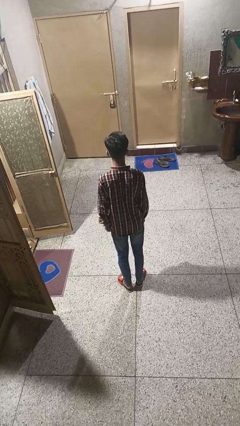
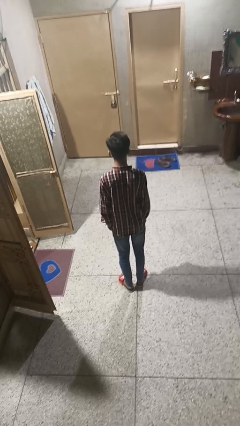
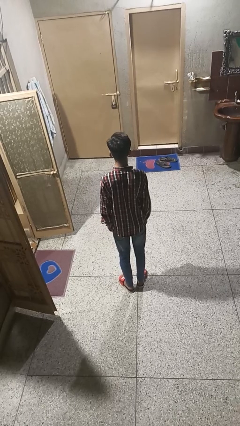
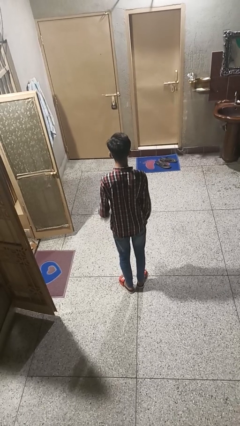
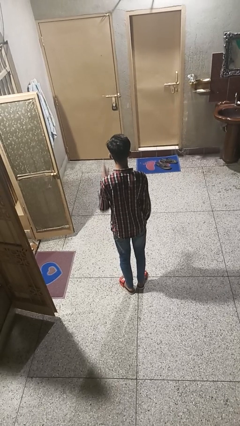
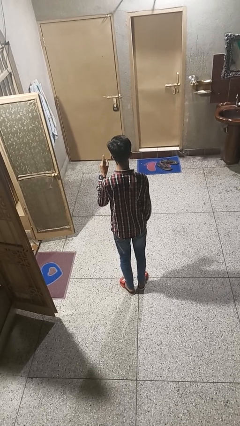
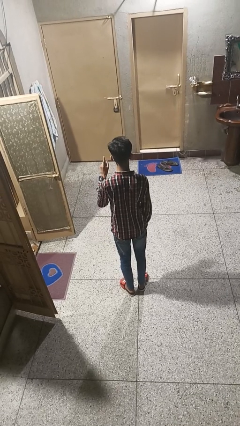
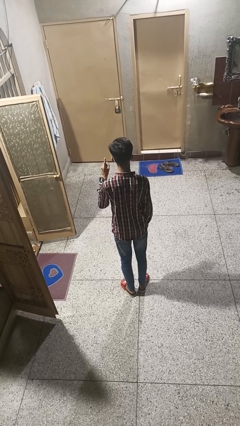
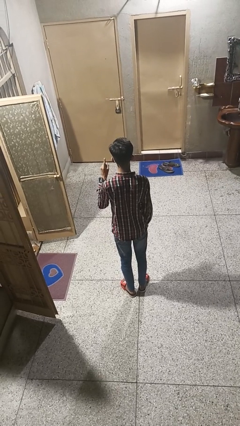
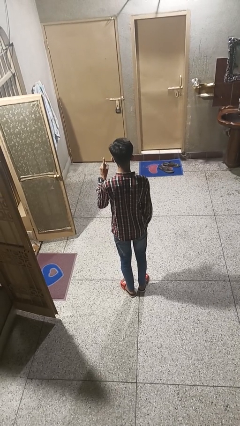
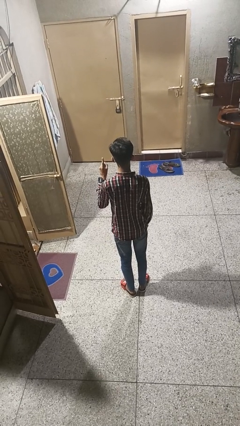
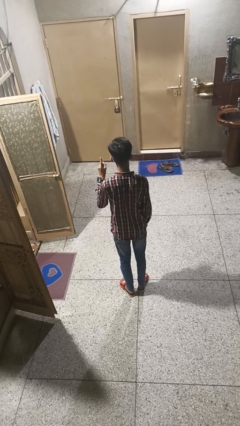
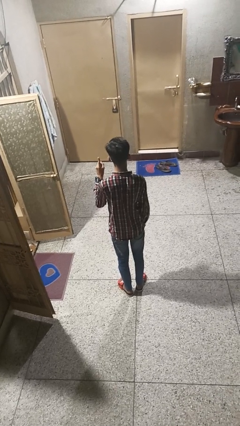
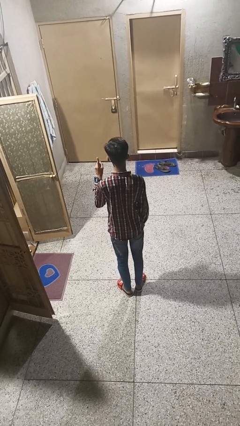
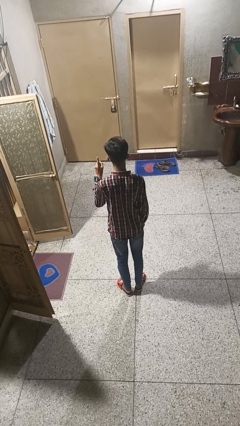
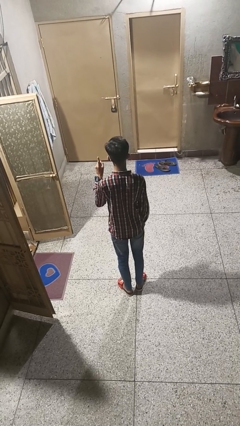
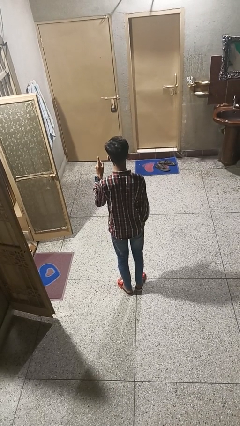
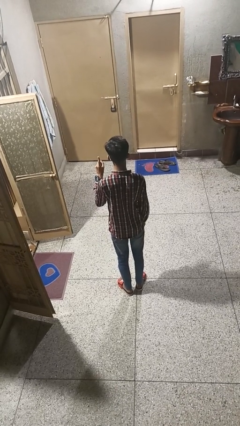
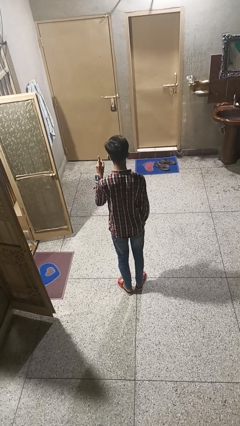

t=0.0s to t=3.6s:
person gestures number one

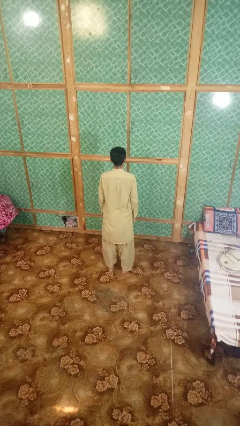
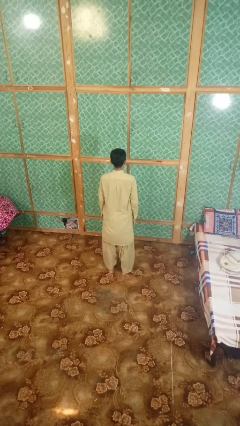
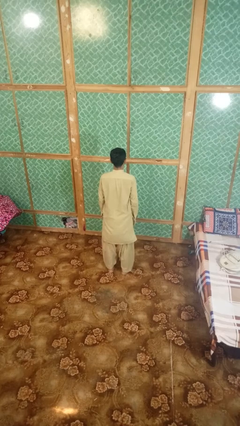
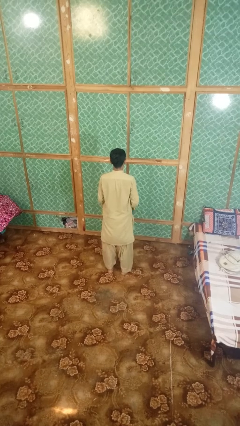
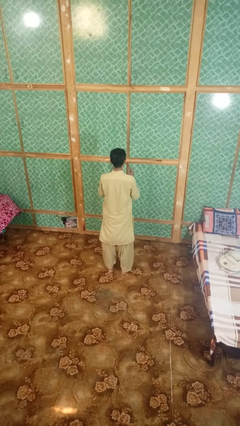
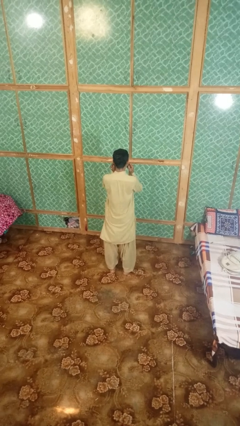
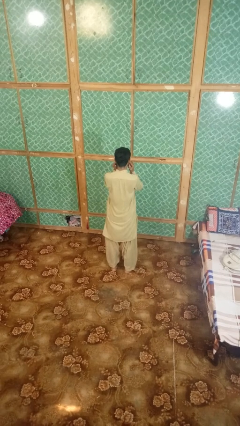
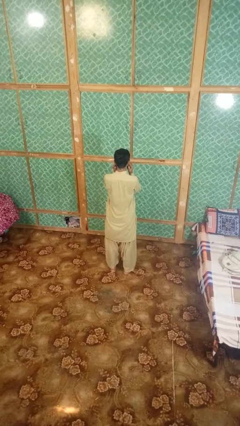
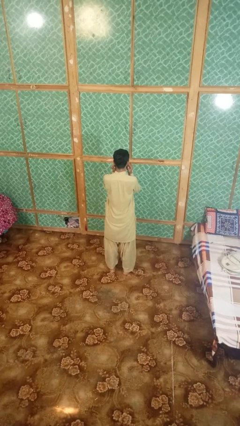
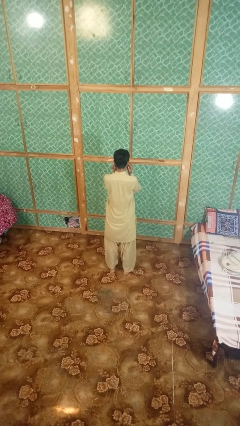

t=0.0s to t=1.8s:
person puts fingers in ear

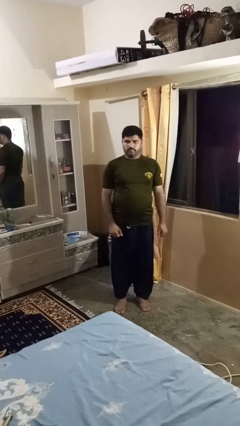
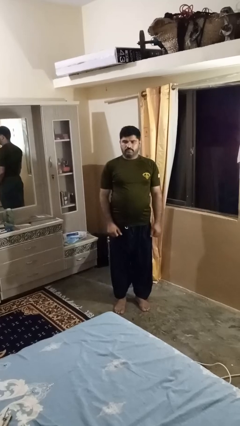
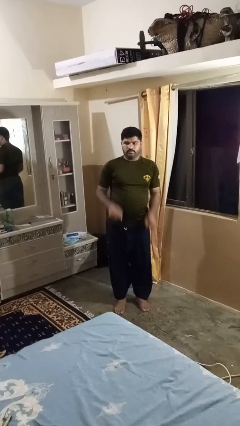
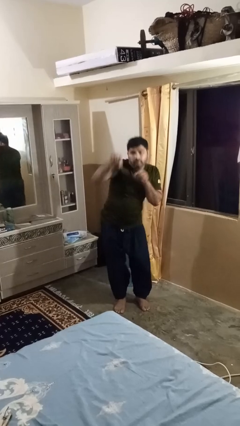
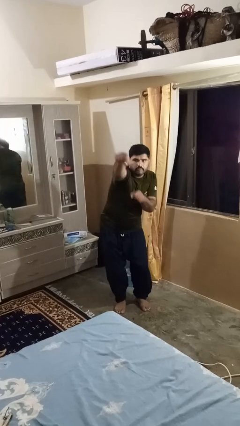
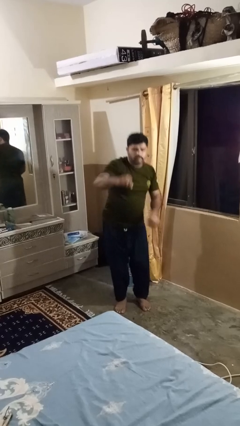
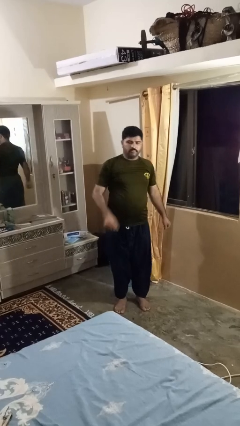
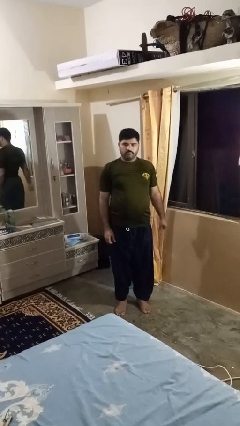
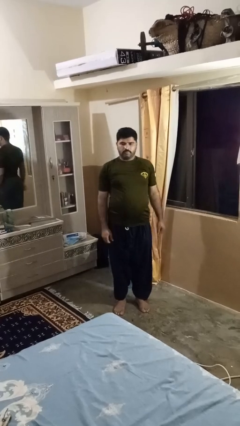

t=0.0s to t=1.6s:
person karate chop

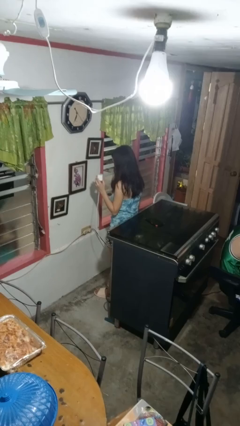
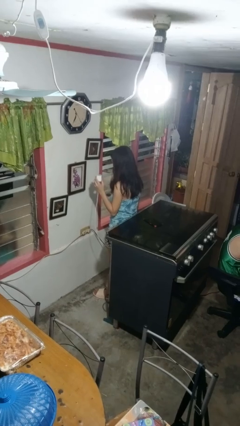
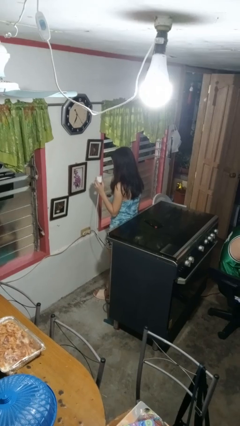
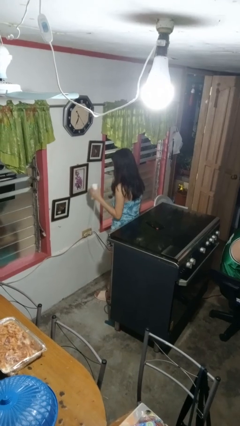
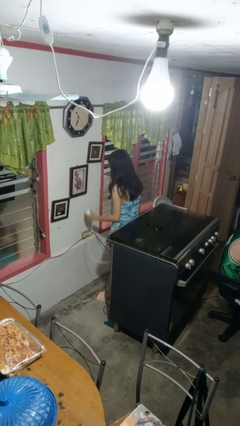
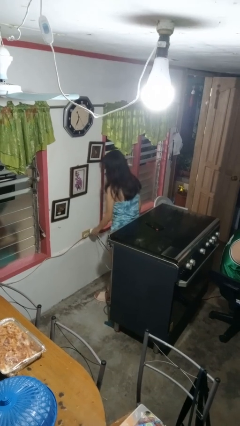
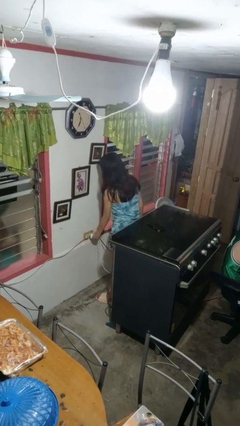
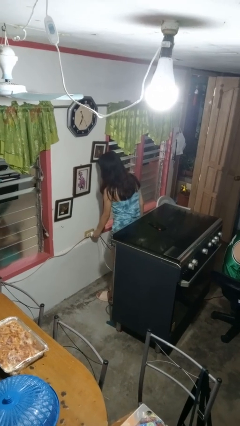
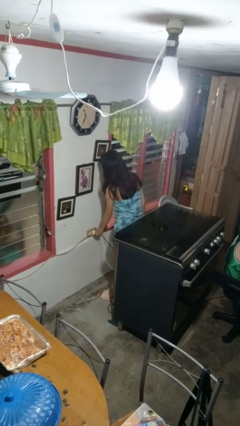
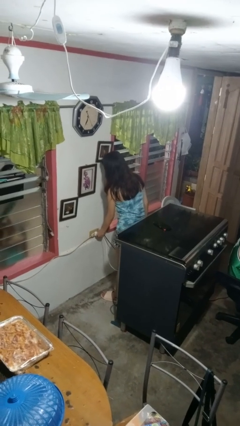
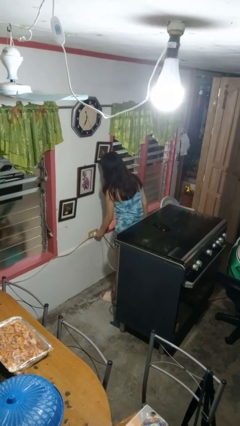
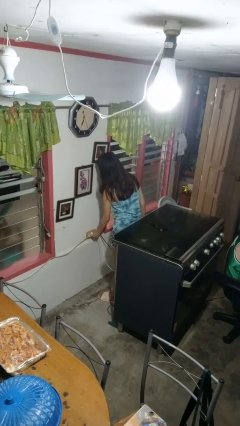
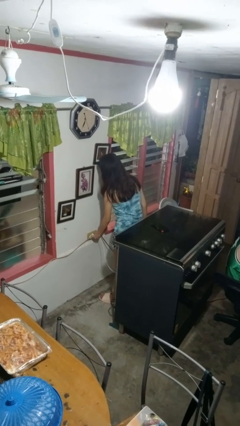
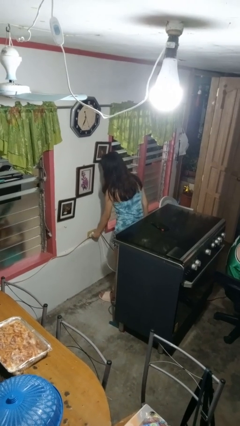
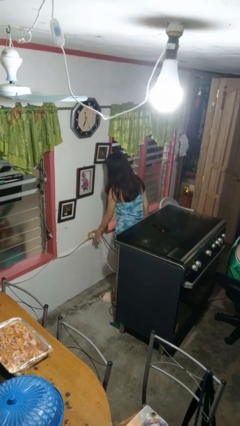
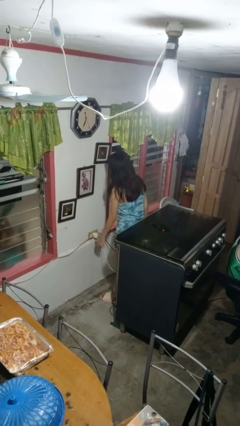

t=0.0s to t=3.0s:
person plugs into electrical socket

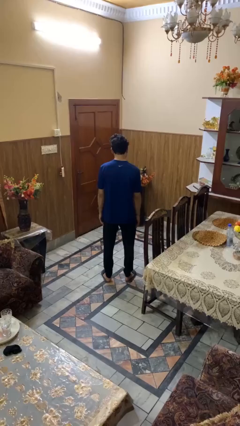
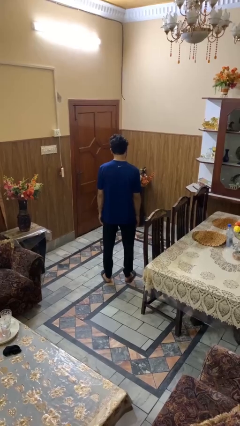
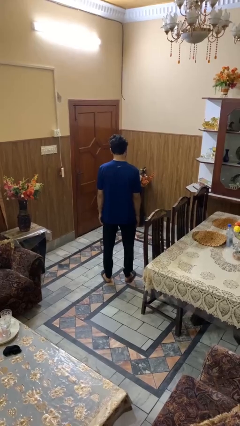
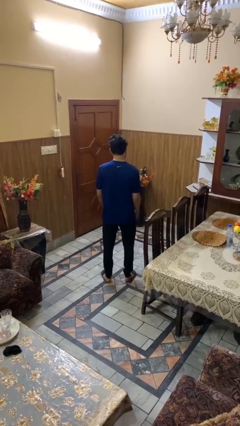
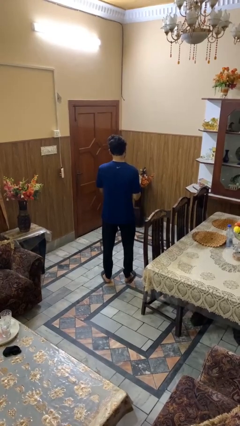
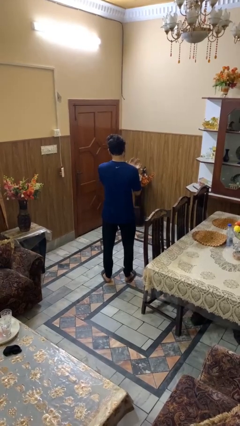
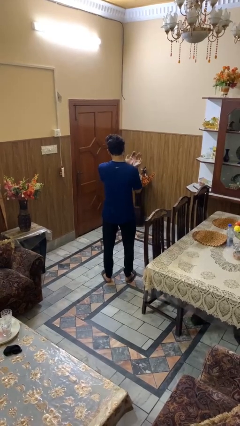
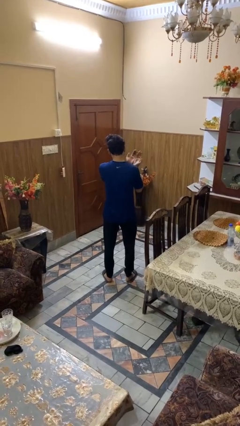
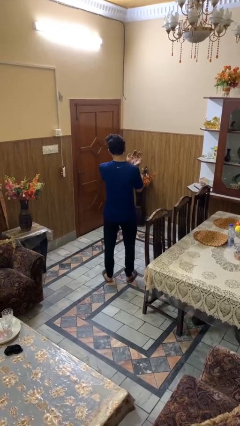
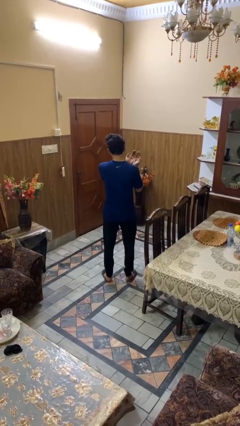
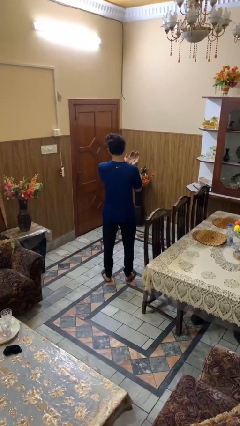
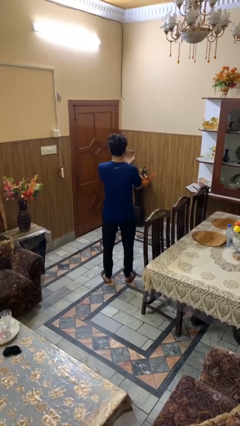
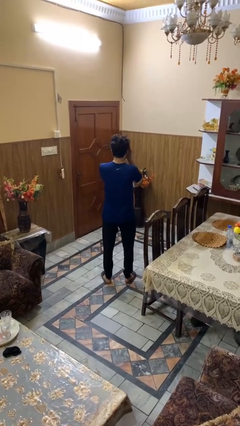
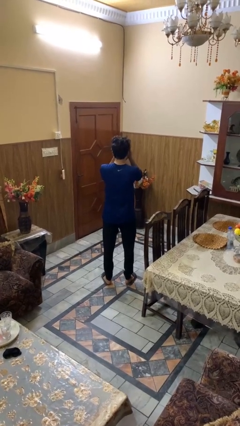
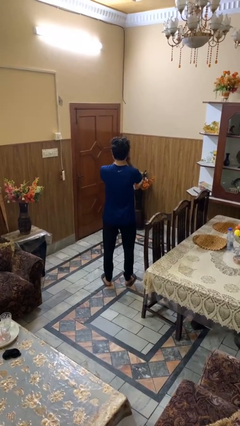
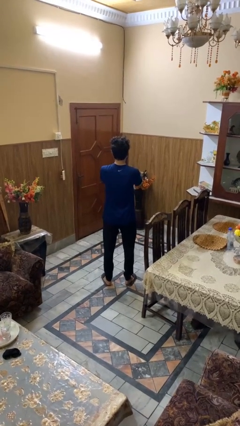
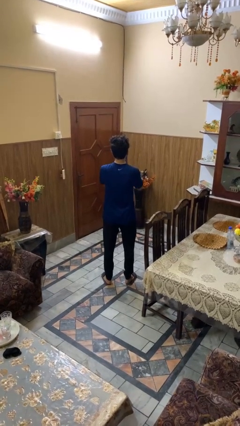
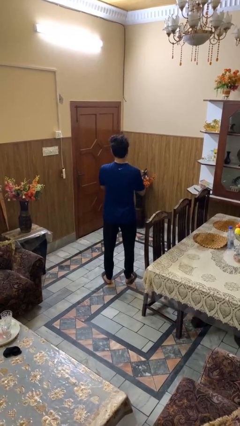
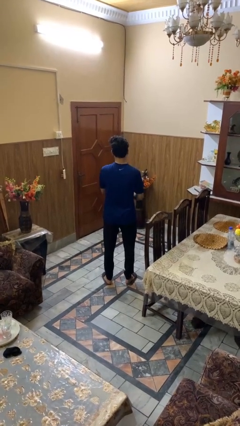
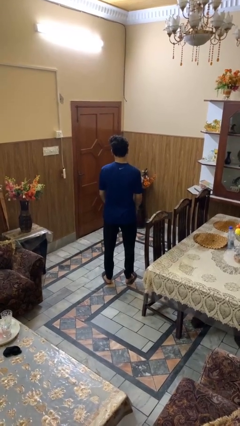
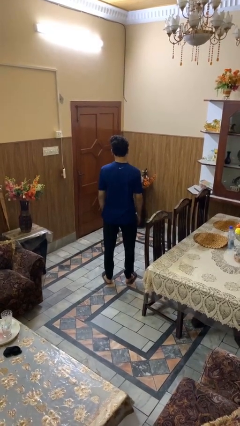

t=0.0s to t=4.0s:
person prays

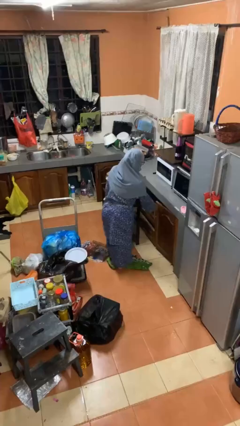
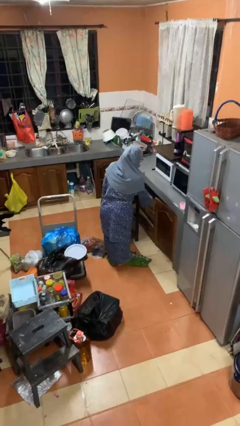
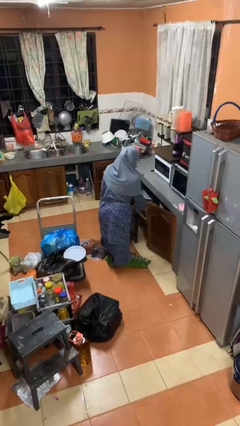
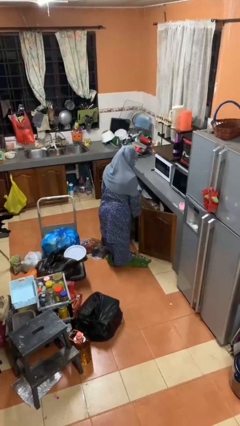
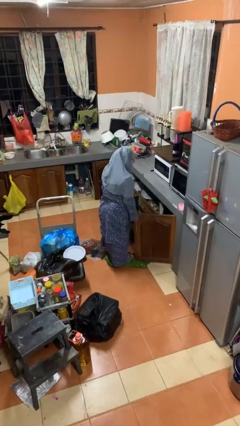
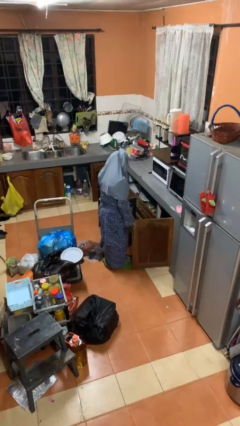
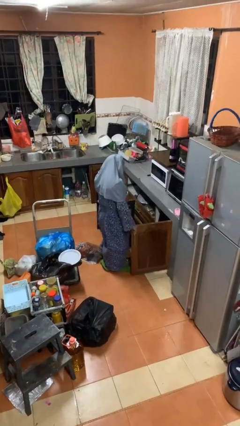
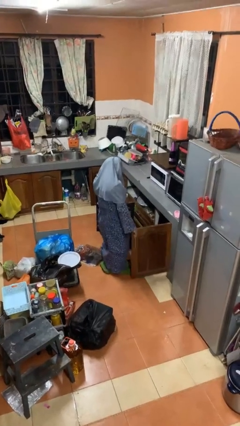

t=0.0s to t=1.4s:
person opens cabinet

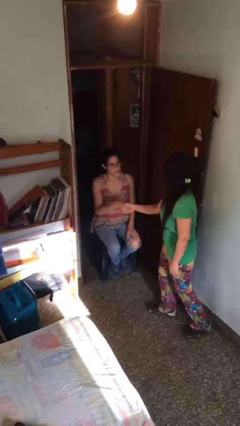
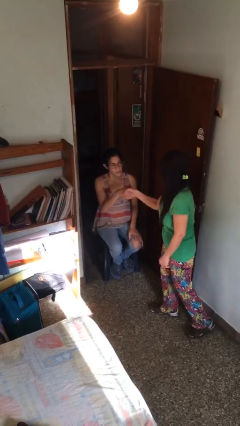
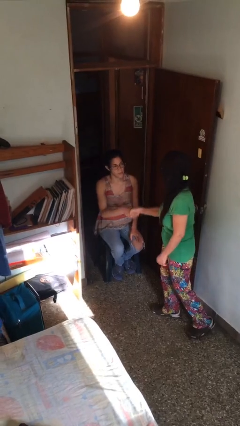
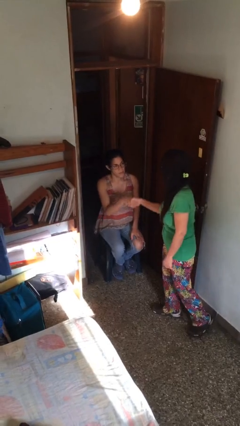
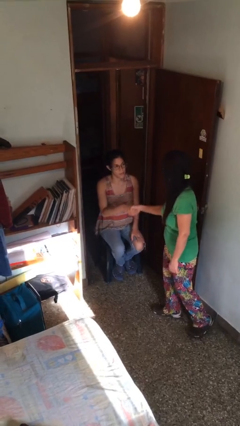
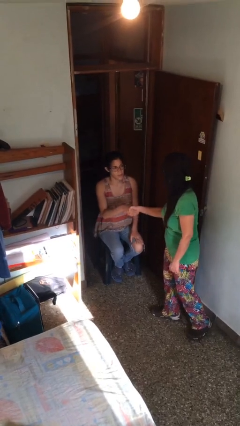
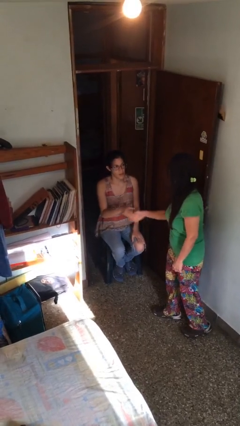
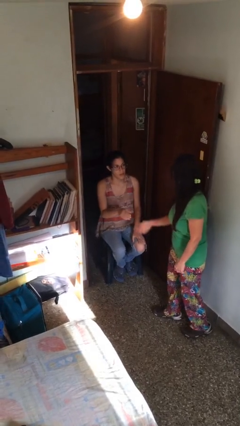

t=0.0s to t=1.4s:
person shakes hand

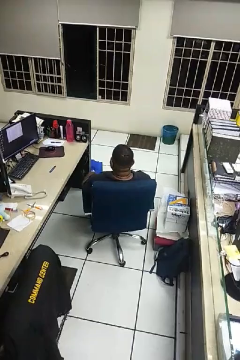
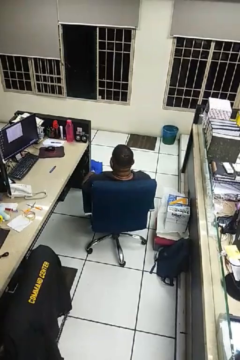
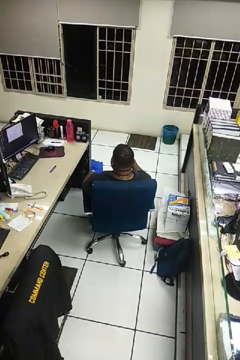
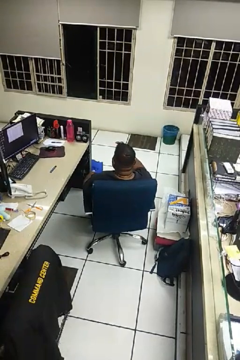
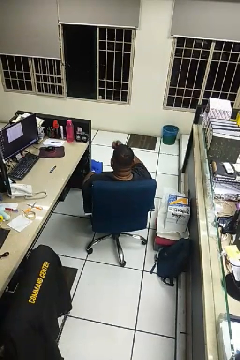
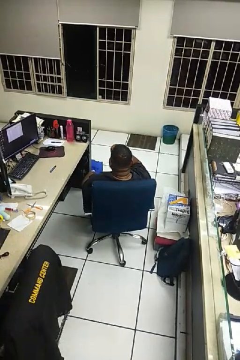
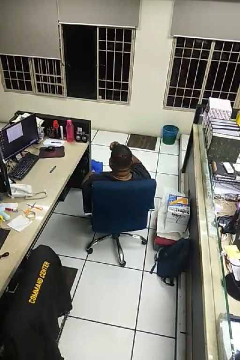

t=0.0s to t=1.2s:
person gestures watch closely
